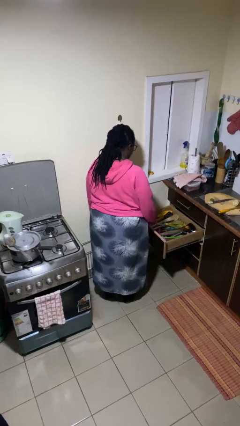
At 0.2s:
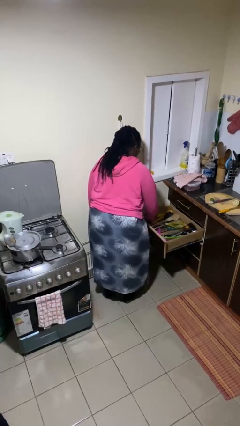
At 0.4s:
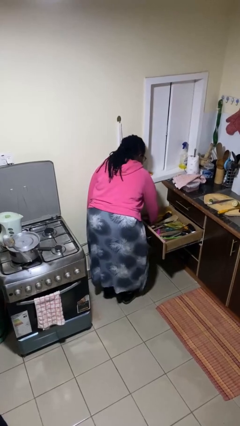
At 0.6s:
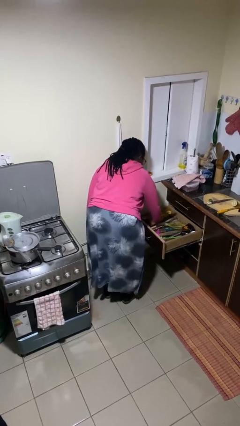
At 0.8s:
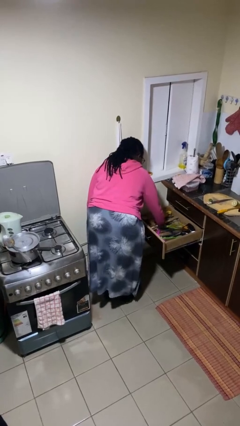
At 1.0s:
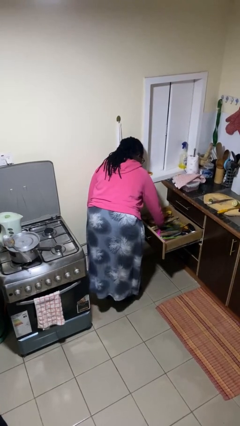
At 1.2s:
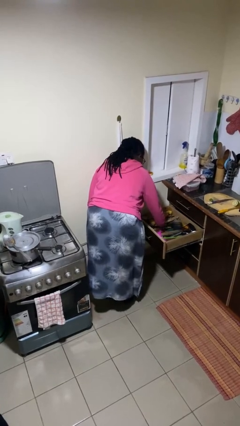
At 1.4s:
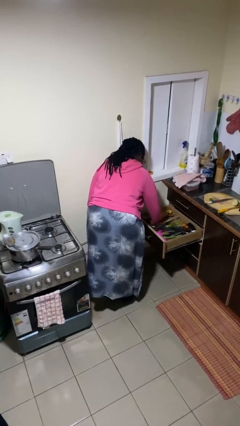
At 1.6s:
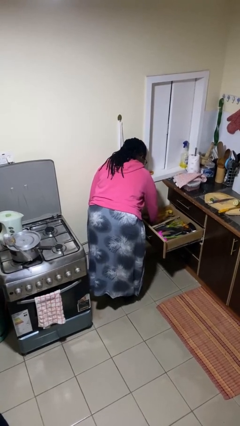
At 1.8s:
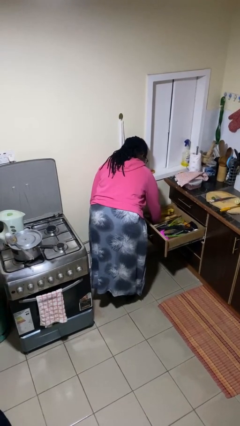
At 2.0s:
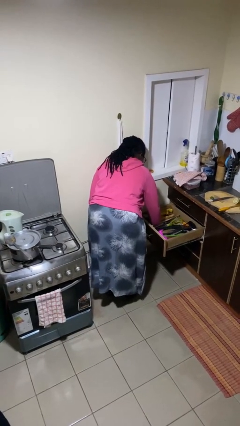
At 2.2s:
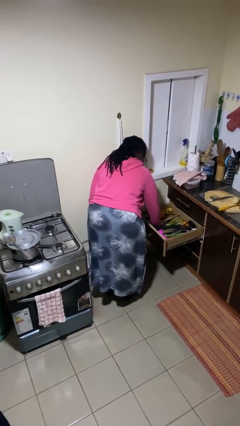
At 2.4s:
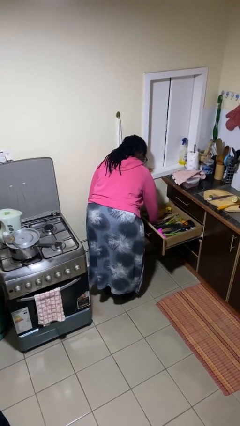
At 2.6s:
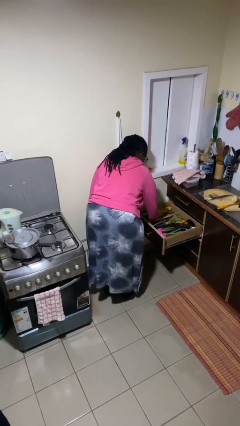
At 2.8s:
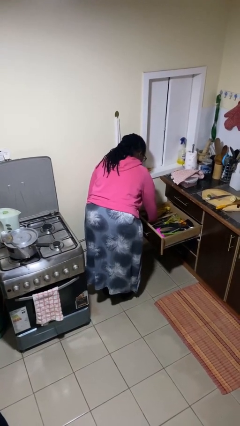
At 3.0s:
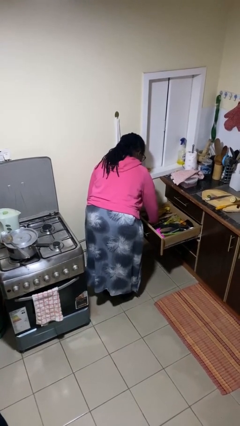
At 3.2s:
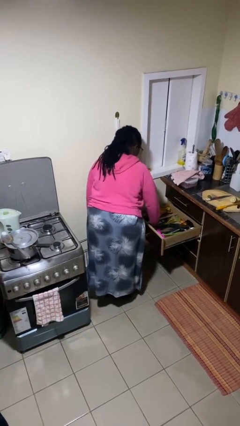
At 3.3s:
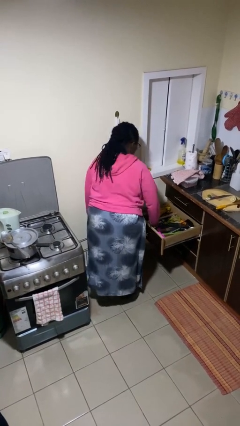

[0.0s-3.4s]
person searches in kitchen drawer

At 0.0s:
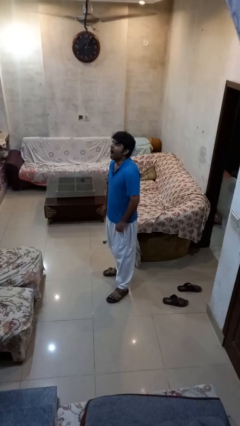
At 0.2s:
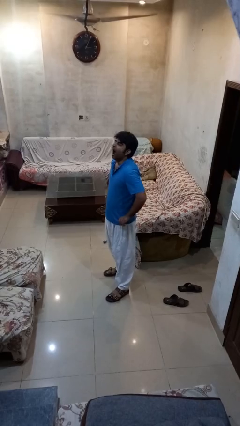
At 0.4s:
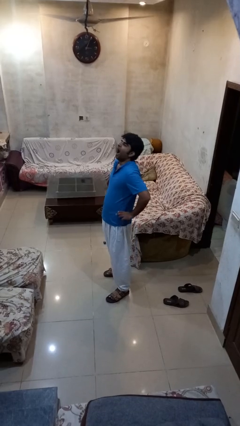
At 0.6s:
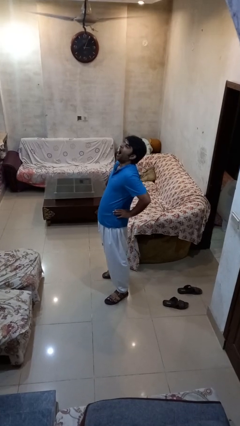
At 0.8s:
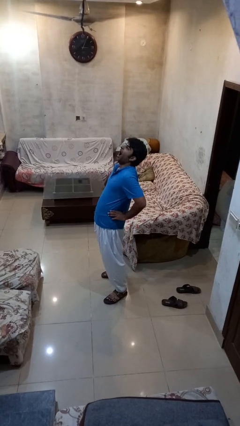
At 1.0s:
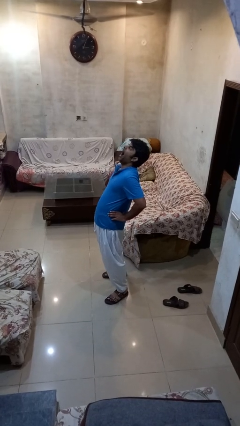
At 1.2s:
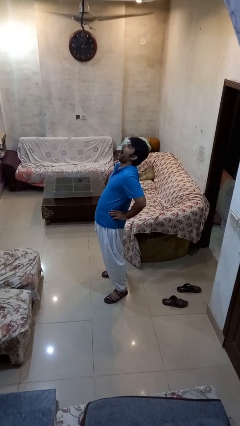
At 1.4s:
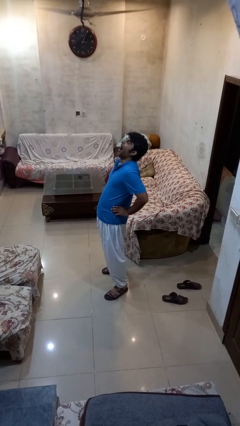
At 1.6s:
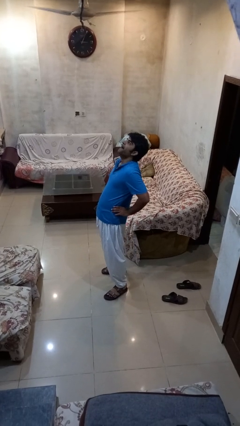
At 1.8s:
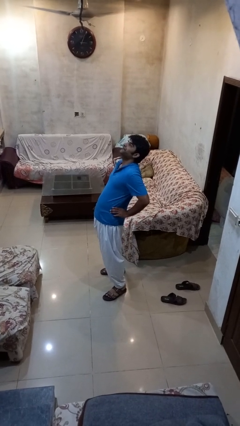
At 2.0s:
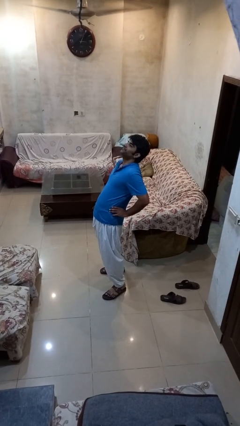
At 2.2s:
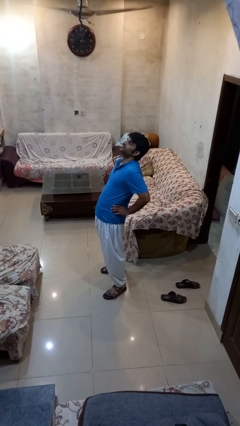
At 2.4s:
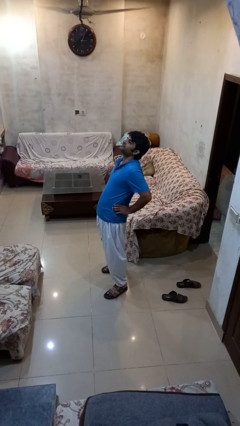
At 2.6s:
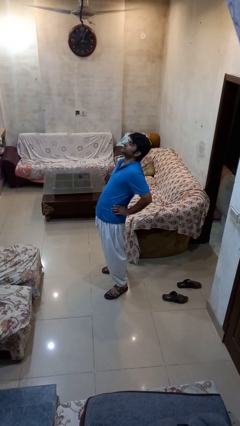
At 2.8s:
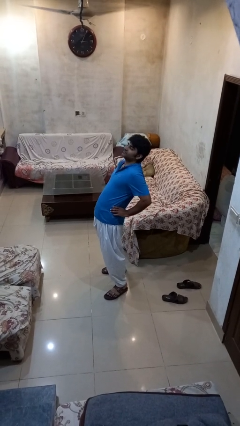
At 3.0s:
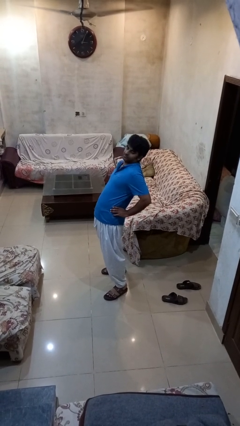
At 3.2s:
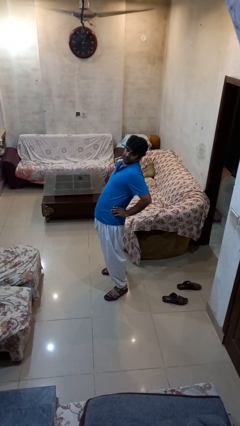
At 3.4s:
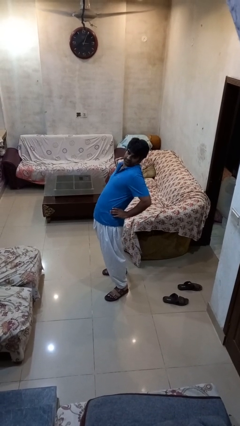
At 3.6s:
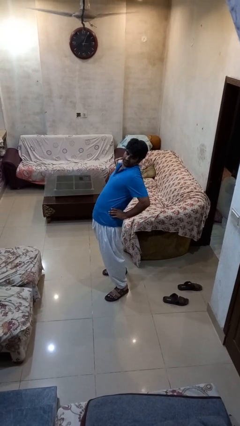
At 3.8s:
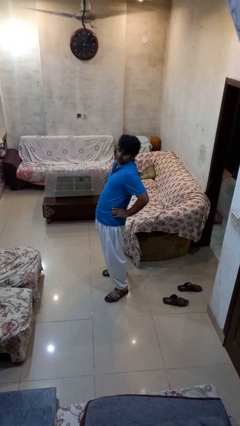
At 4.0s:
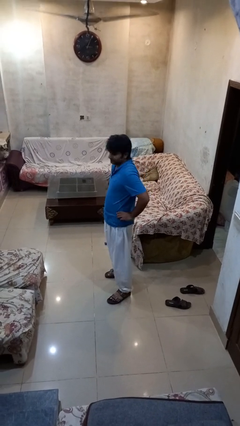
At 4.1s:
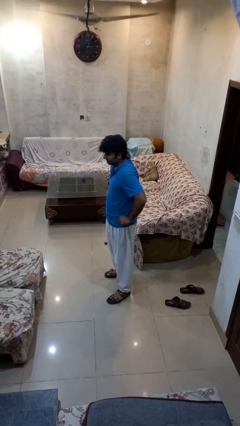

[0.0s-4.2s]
person stretches back

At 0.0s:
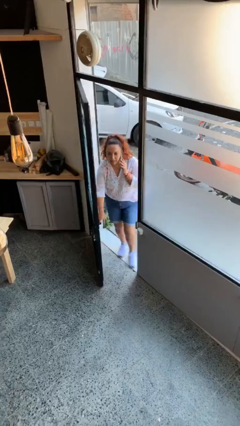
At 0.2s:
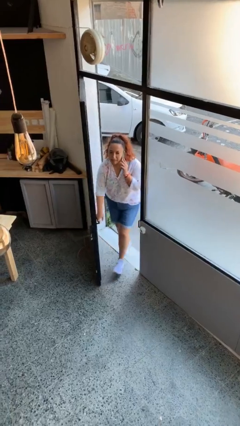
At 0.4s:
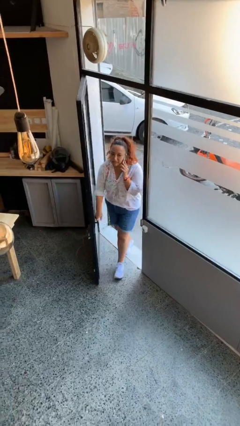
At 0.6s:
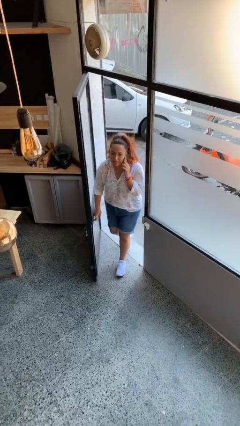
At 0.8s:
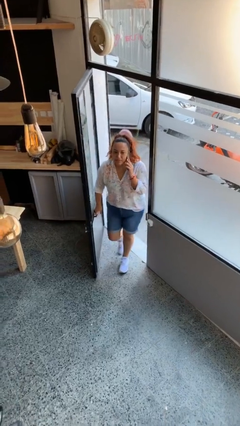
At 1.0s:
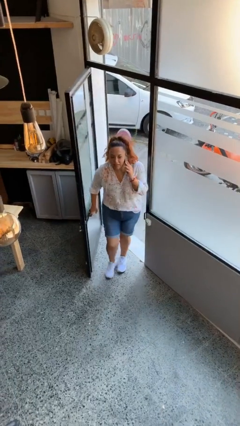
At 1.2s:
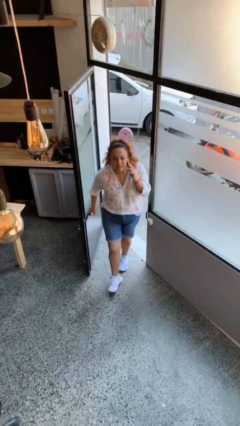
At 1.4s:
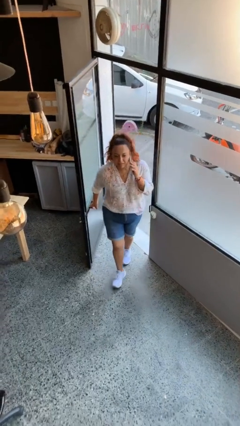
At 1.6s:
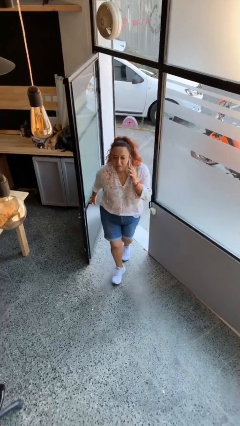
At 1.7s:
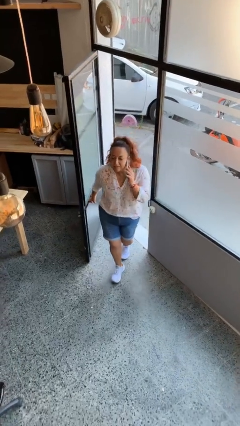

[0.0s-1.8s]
person enters scene through structure

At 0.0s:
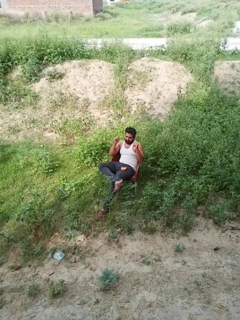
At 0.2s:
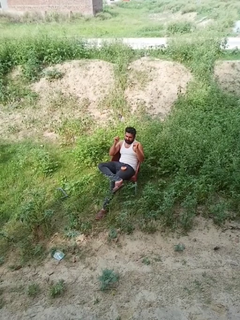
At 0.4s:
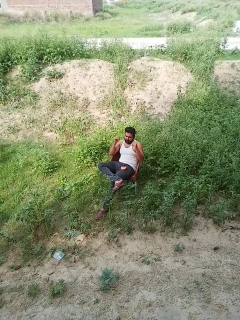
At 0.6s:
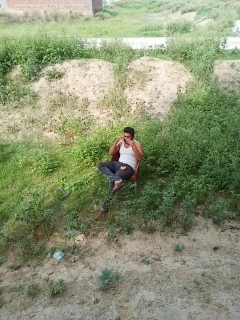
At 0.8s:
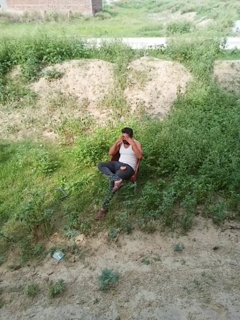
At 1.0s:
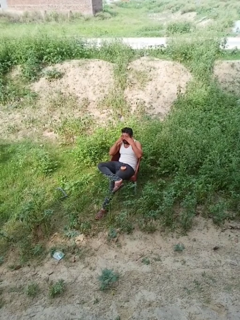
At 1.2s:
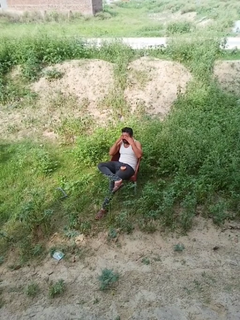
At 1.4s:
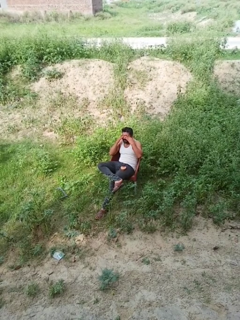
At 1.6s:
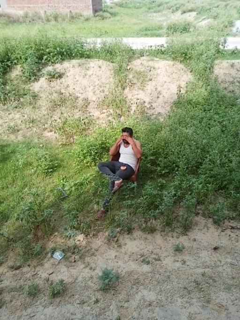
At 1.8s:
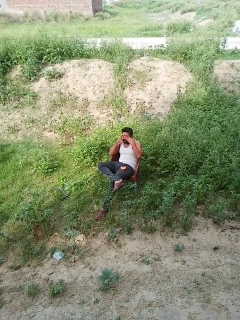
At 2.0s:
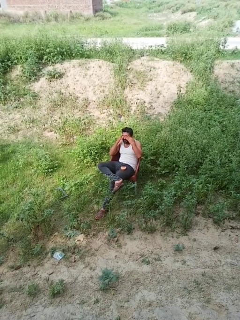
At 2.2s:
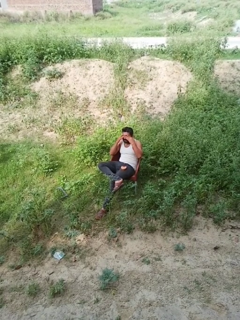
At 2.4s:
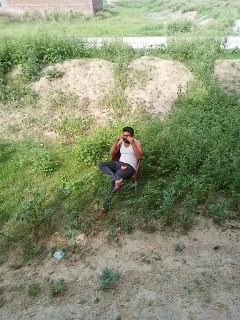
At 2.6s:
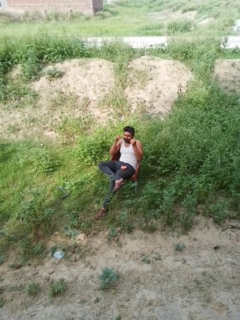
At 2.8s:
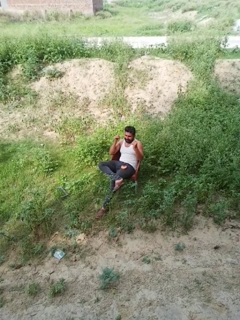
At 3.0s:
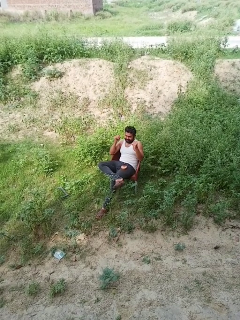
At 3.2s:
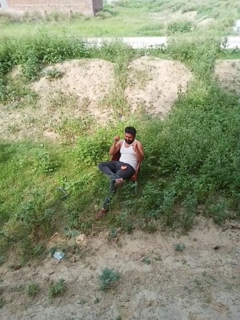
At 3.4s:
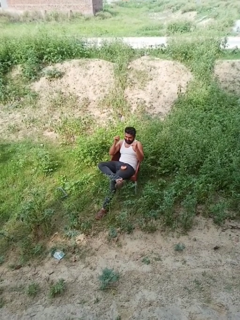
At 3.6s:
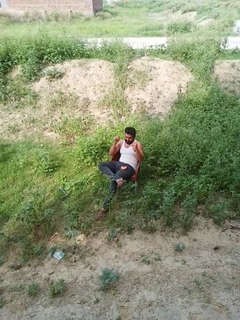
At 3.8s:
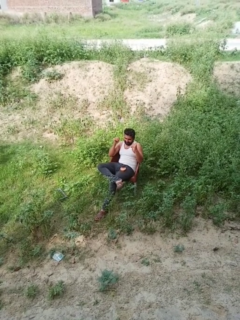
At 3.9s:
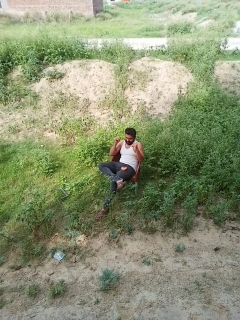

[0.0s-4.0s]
person rubs eyes

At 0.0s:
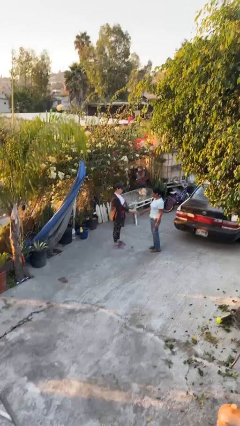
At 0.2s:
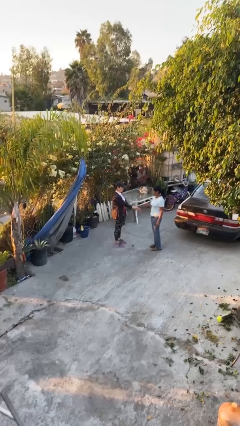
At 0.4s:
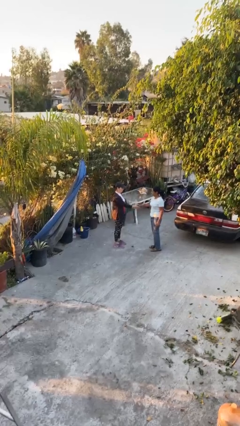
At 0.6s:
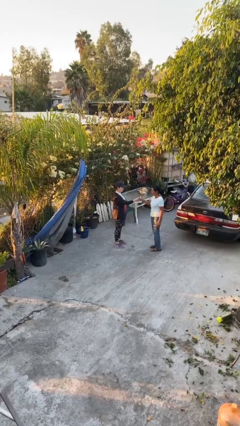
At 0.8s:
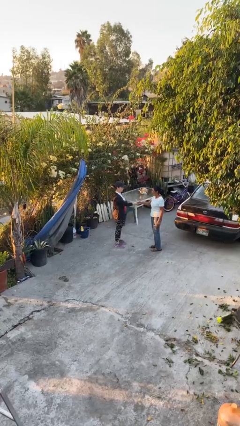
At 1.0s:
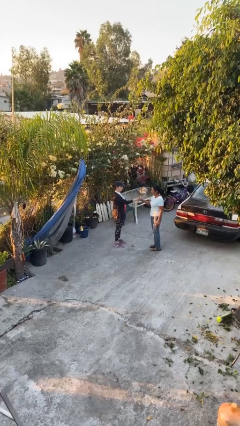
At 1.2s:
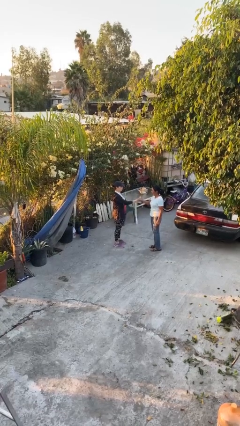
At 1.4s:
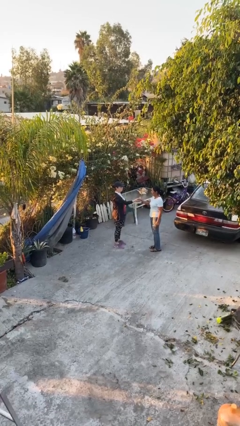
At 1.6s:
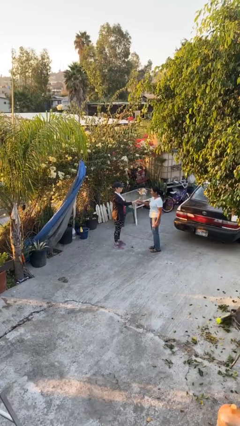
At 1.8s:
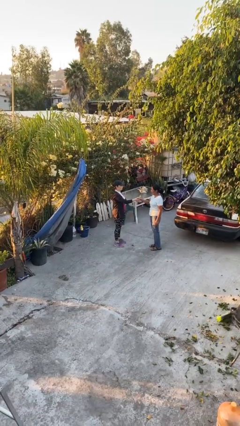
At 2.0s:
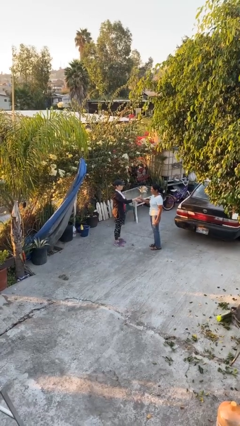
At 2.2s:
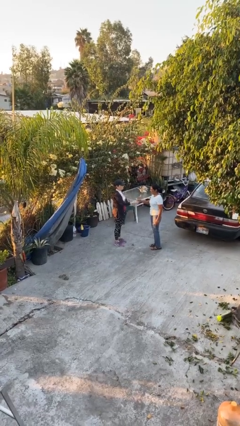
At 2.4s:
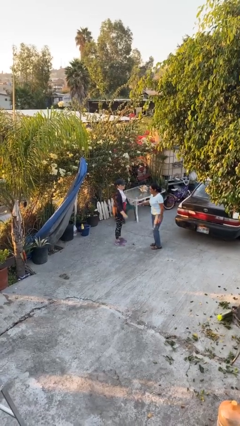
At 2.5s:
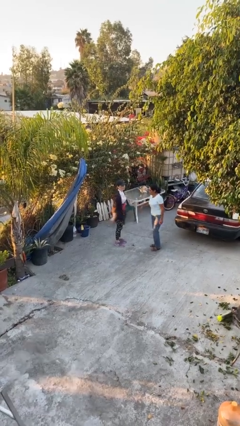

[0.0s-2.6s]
person shakes hand

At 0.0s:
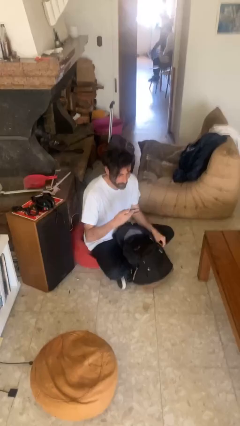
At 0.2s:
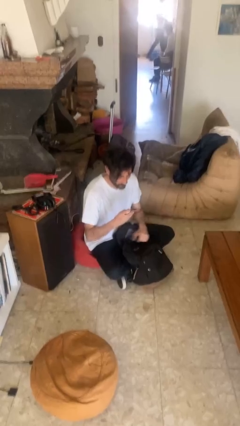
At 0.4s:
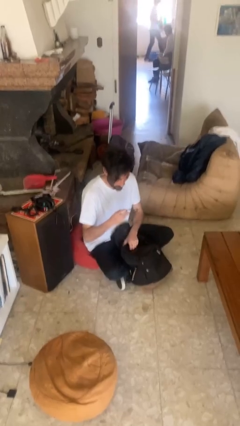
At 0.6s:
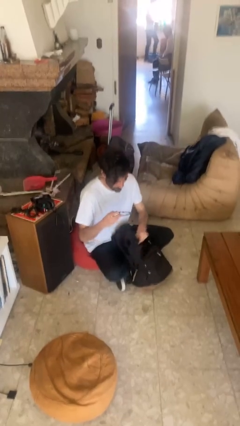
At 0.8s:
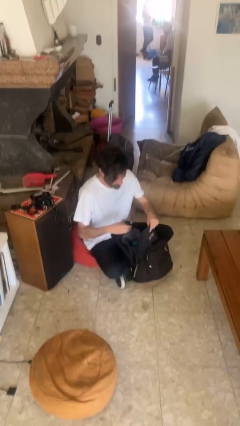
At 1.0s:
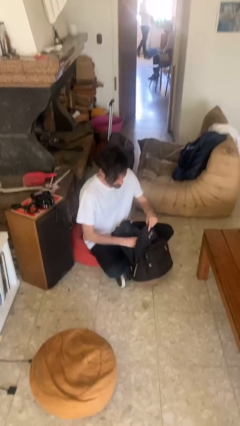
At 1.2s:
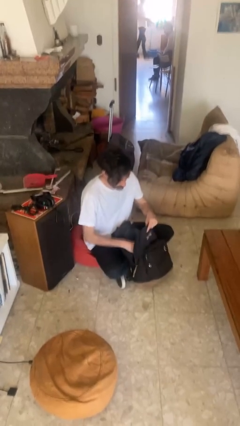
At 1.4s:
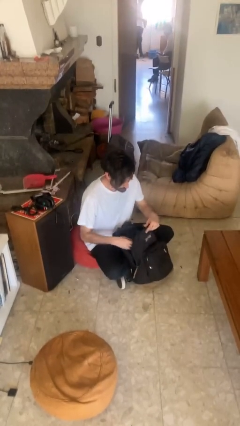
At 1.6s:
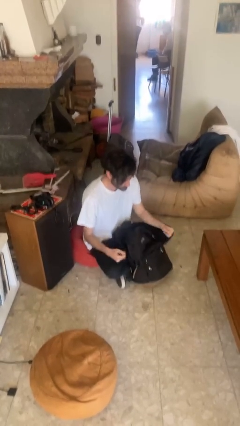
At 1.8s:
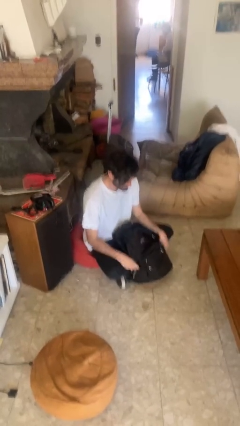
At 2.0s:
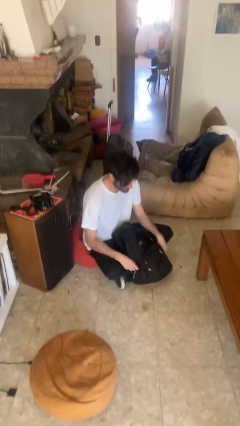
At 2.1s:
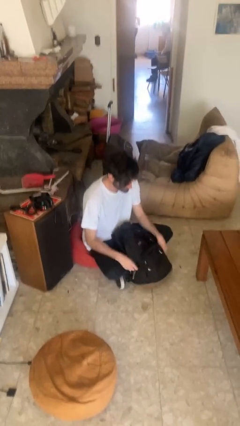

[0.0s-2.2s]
person puts object into backpack
